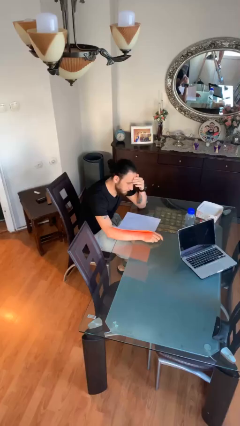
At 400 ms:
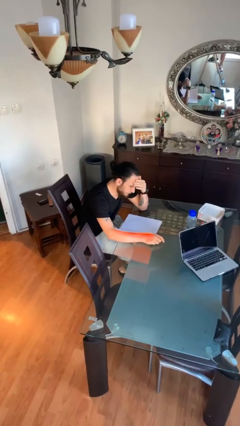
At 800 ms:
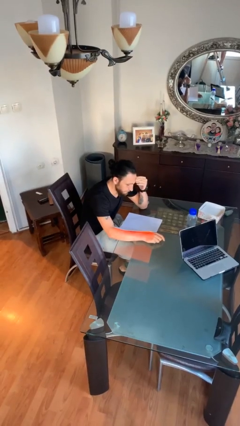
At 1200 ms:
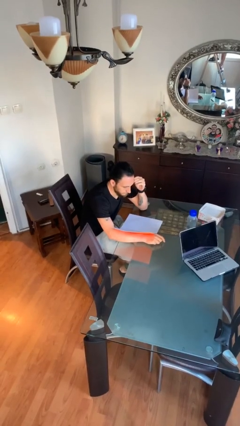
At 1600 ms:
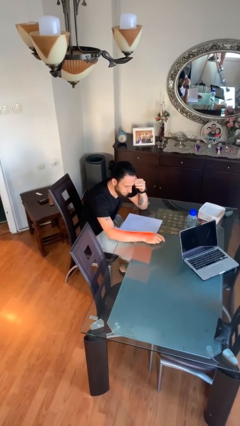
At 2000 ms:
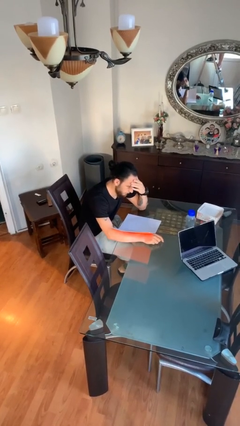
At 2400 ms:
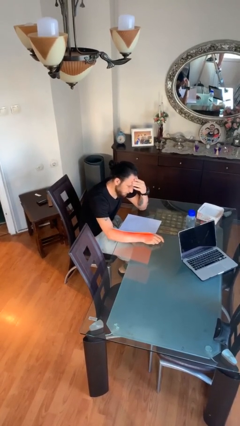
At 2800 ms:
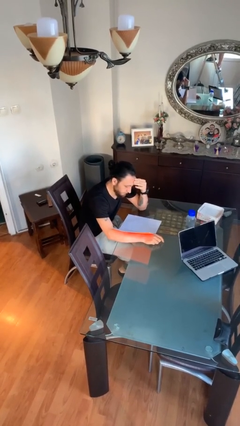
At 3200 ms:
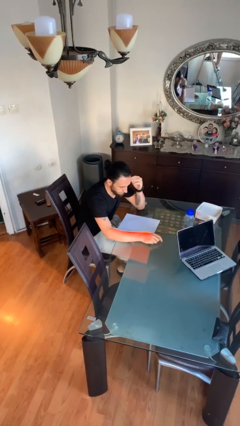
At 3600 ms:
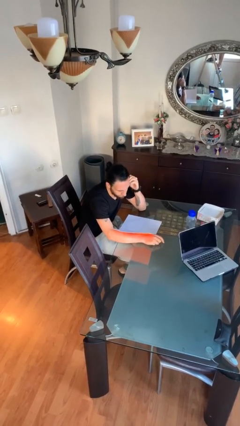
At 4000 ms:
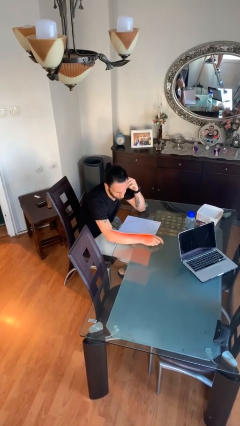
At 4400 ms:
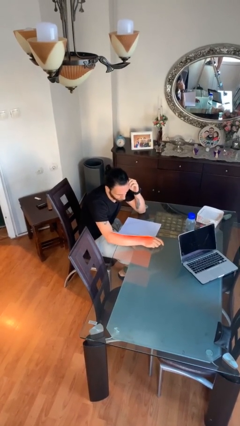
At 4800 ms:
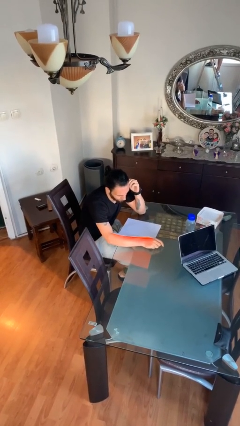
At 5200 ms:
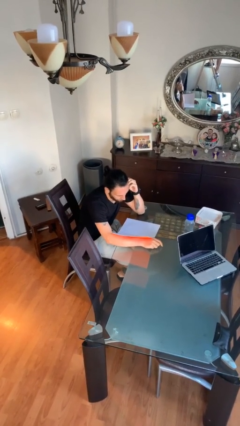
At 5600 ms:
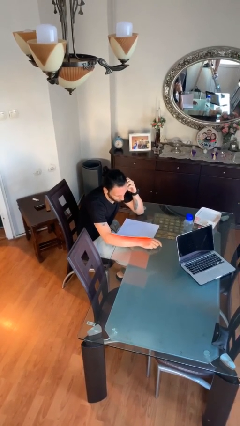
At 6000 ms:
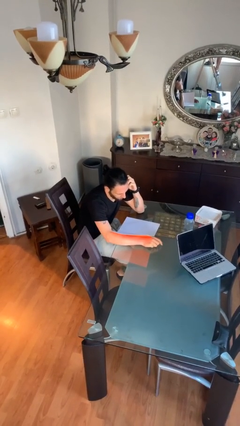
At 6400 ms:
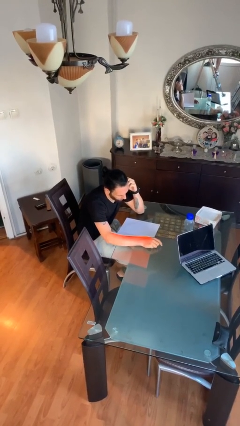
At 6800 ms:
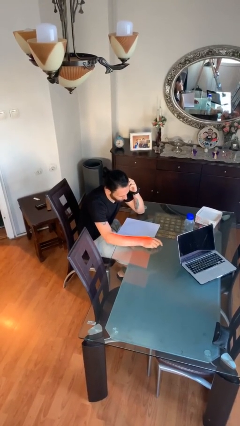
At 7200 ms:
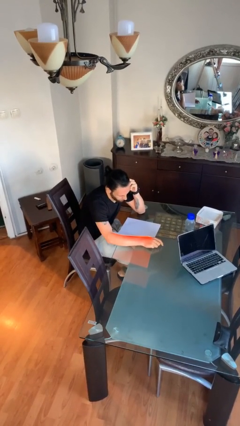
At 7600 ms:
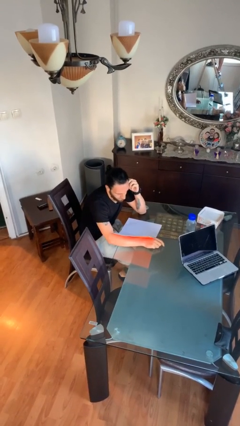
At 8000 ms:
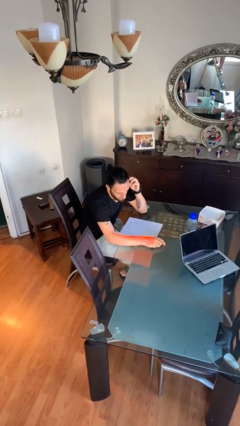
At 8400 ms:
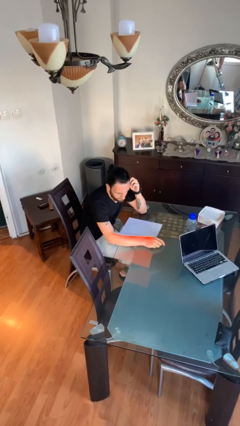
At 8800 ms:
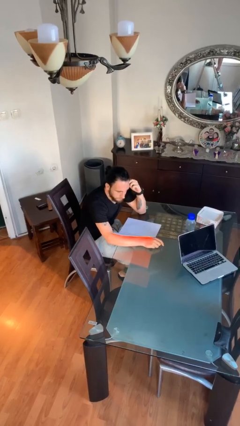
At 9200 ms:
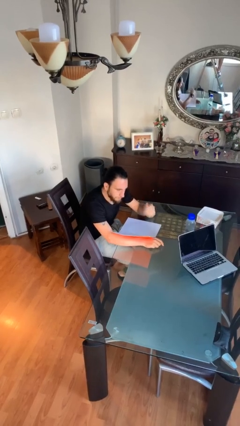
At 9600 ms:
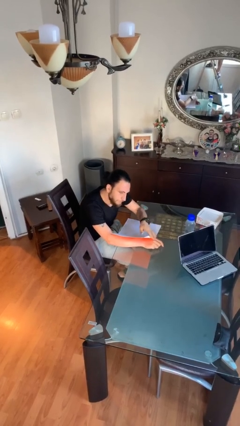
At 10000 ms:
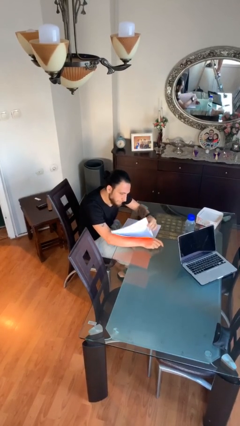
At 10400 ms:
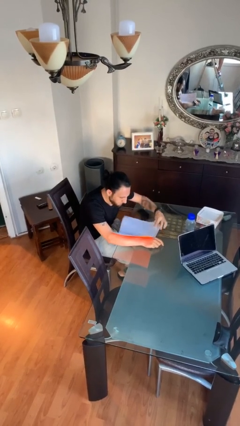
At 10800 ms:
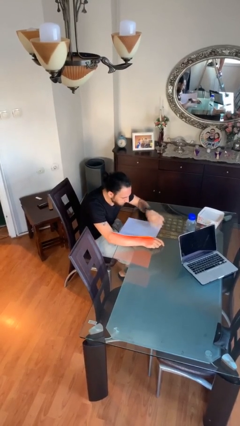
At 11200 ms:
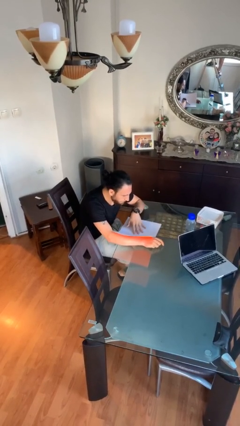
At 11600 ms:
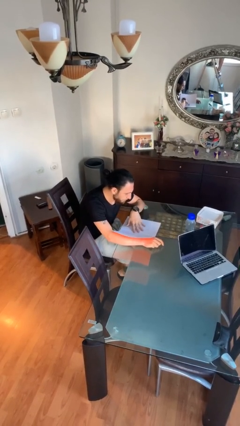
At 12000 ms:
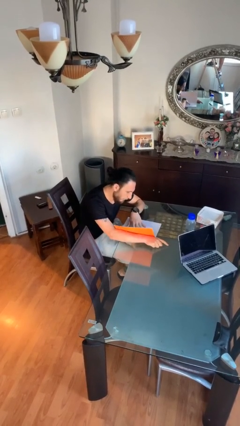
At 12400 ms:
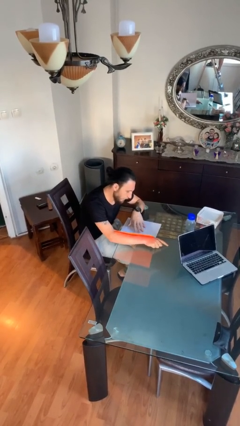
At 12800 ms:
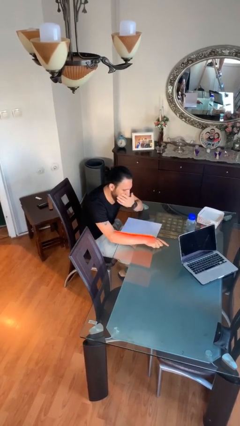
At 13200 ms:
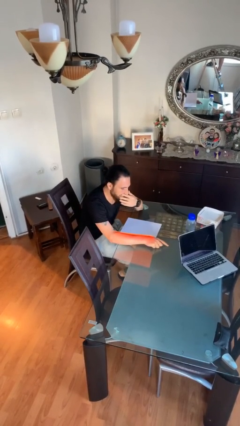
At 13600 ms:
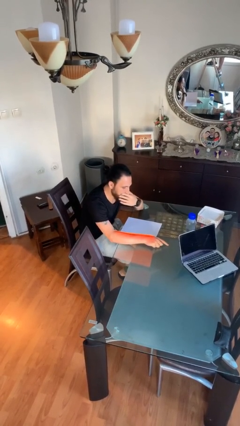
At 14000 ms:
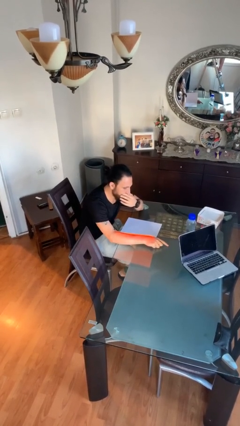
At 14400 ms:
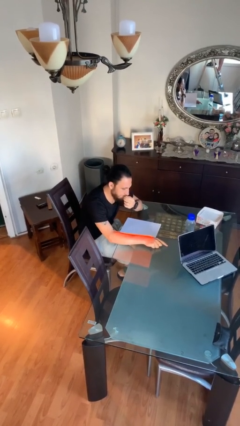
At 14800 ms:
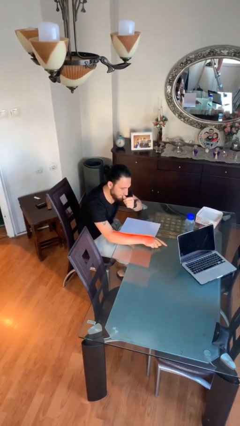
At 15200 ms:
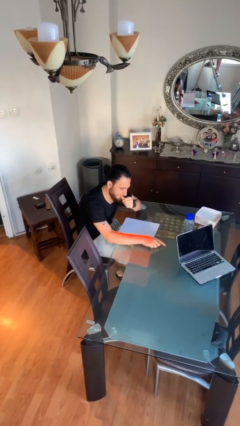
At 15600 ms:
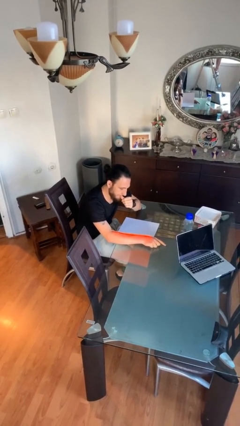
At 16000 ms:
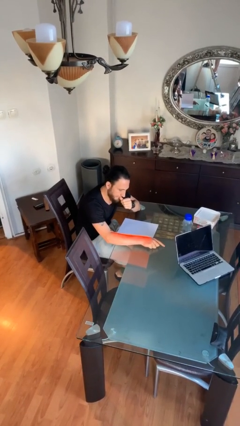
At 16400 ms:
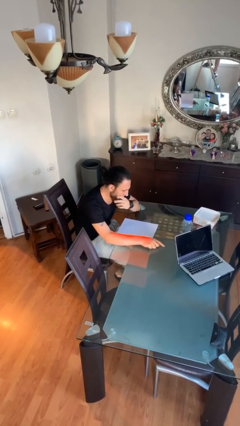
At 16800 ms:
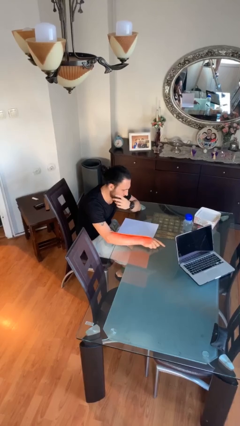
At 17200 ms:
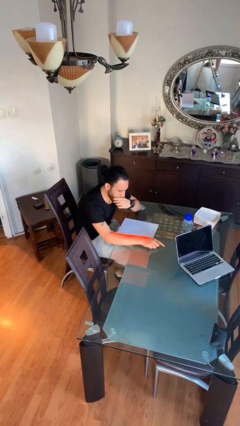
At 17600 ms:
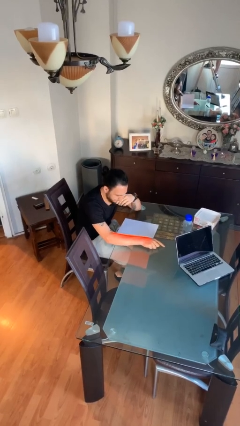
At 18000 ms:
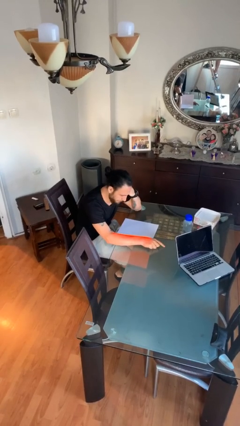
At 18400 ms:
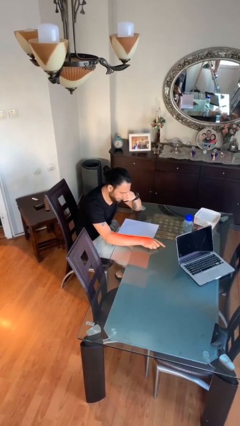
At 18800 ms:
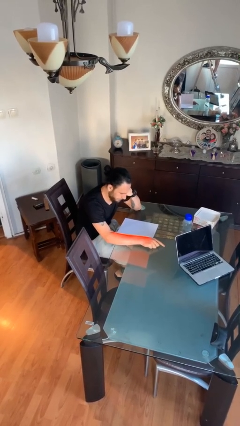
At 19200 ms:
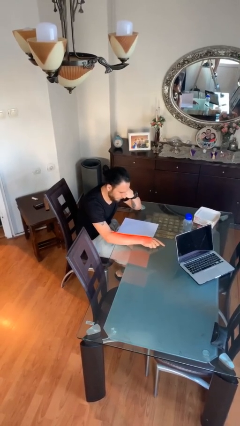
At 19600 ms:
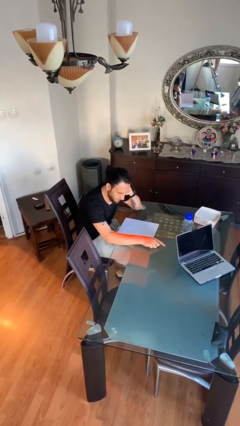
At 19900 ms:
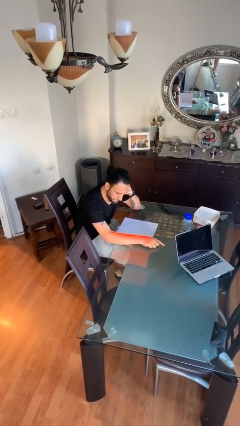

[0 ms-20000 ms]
person reads document

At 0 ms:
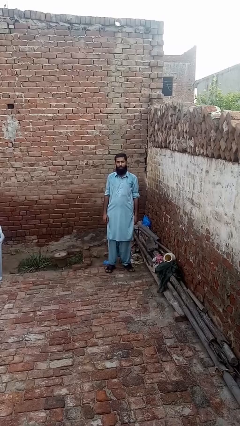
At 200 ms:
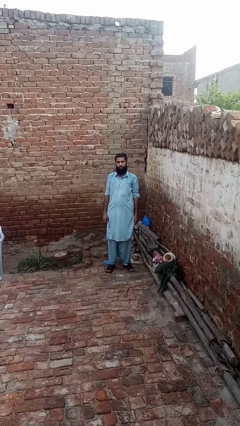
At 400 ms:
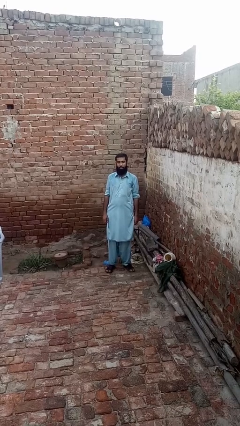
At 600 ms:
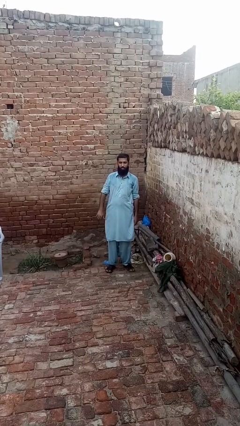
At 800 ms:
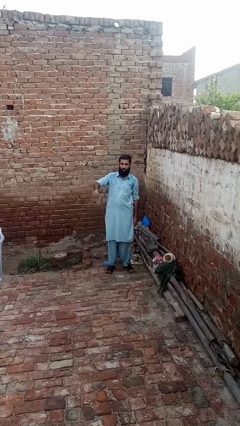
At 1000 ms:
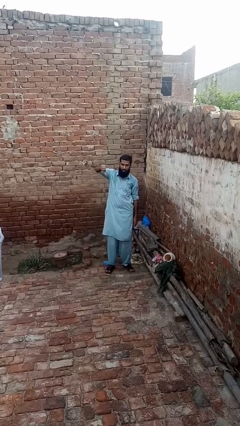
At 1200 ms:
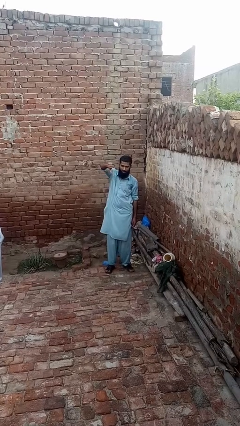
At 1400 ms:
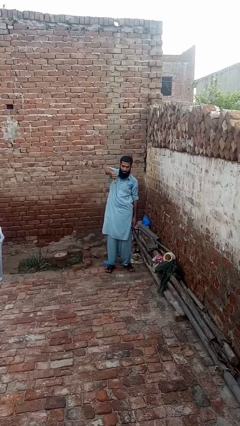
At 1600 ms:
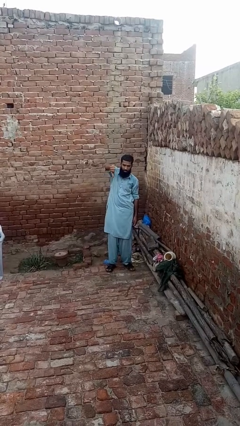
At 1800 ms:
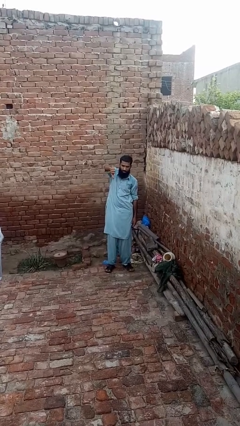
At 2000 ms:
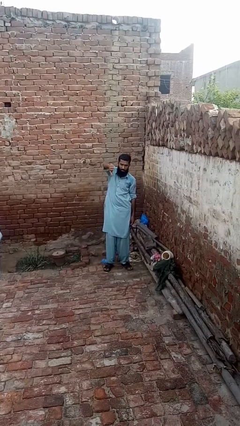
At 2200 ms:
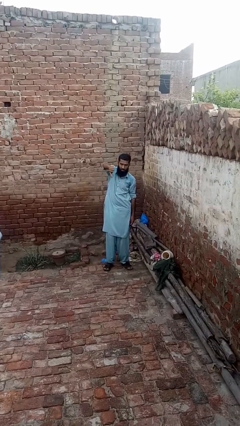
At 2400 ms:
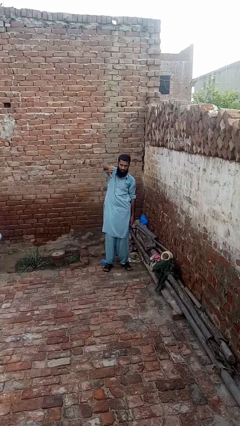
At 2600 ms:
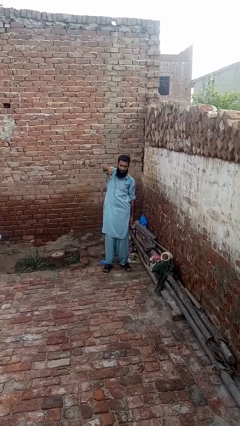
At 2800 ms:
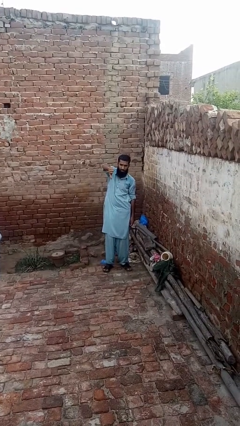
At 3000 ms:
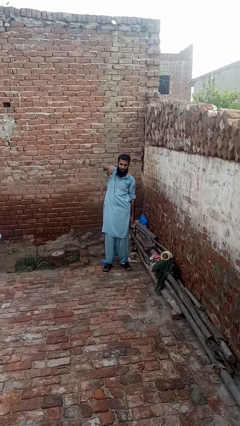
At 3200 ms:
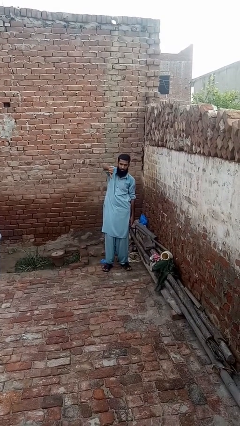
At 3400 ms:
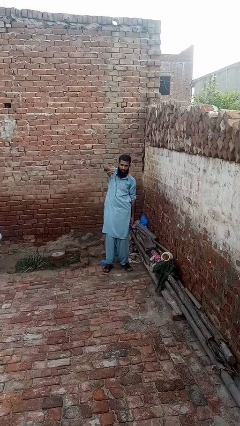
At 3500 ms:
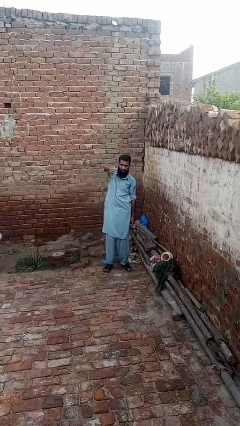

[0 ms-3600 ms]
person gestures thumbs down

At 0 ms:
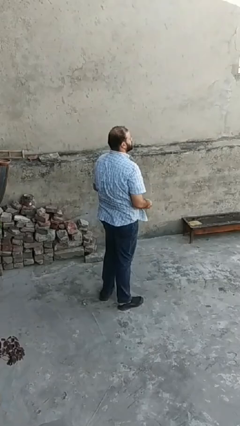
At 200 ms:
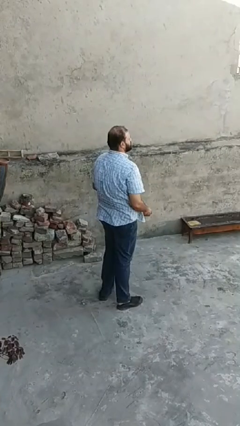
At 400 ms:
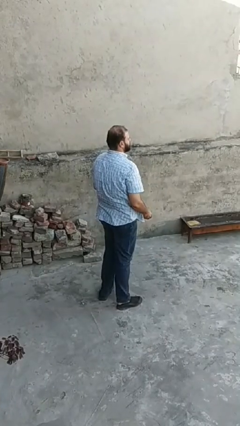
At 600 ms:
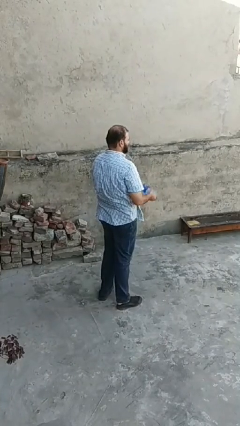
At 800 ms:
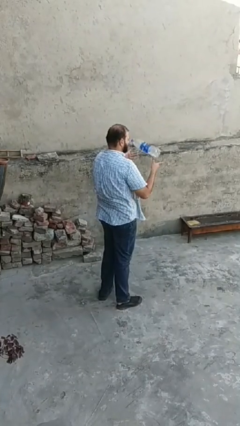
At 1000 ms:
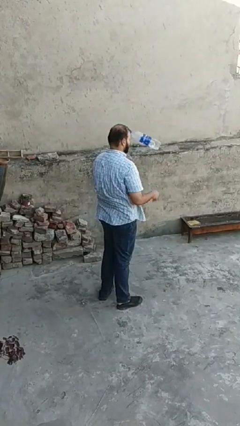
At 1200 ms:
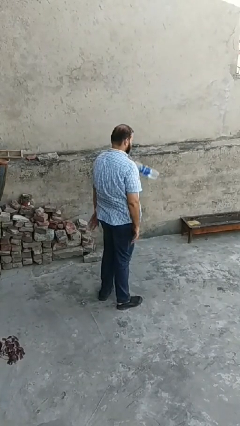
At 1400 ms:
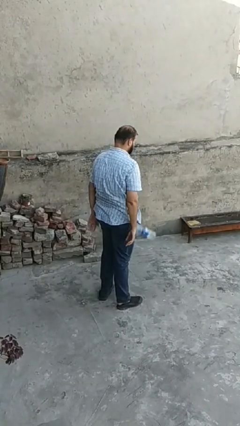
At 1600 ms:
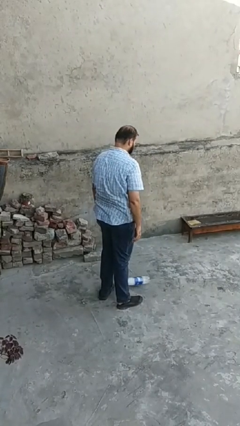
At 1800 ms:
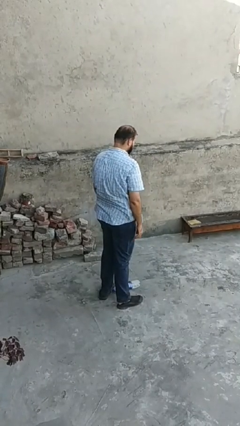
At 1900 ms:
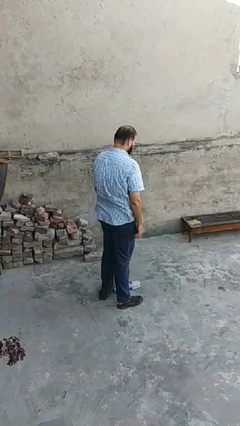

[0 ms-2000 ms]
person throws object into air

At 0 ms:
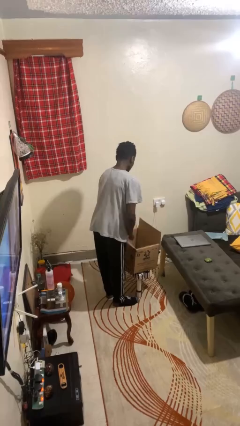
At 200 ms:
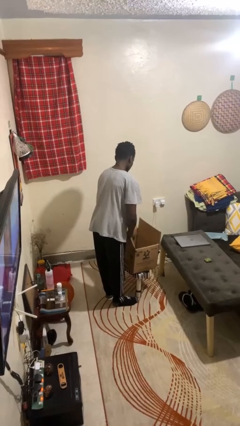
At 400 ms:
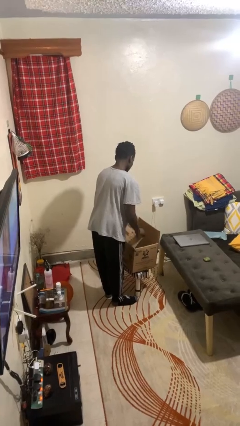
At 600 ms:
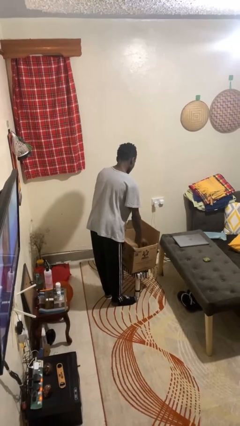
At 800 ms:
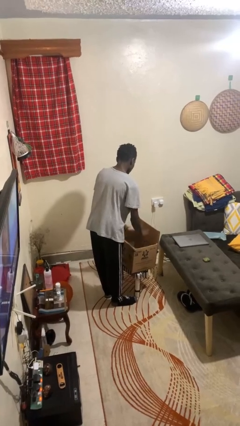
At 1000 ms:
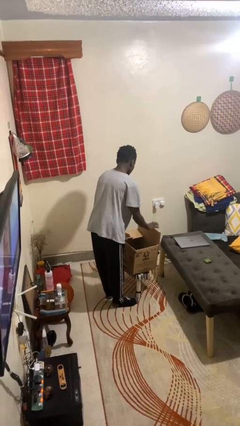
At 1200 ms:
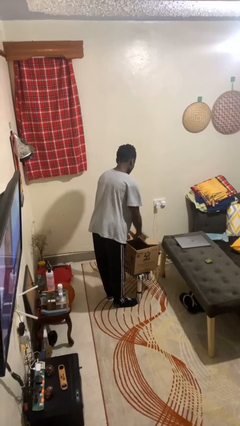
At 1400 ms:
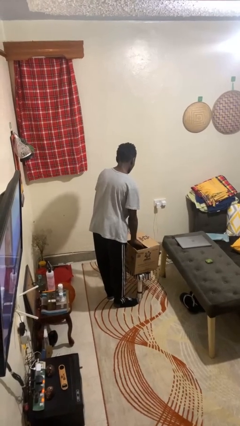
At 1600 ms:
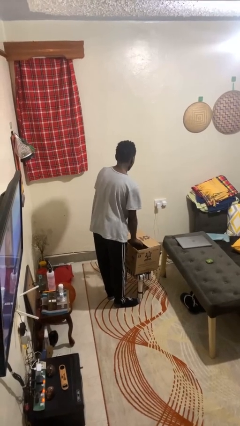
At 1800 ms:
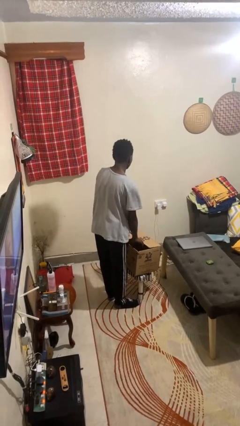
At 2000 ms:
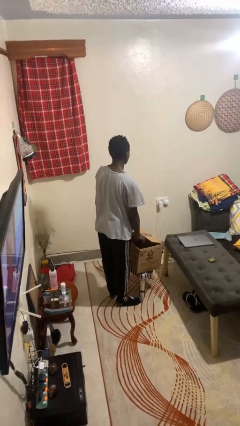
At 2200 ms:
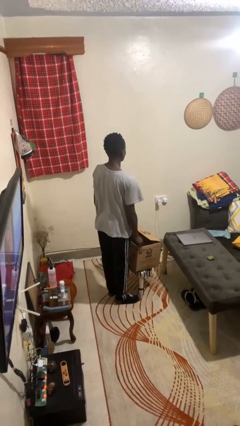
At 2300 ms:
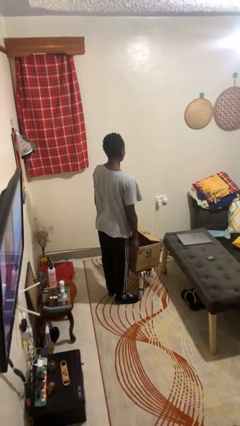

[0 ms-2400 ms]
person closes box
